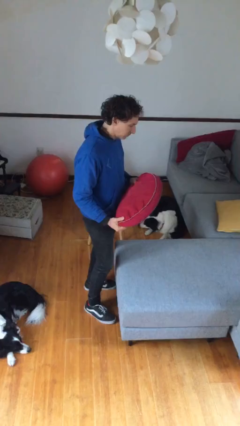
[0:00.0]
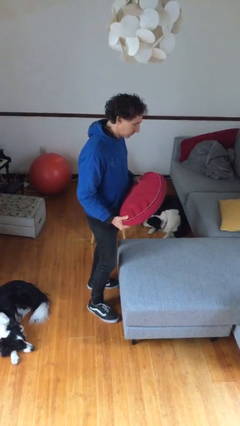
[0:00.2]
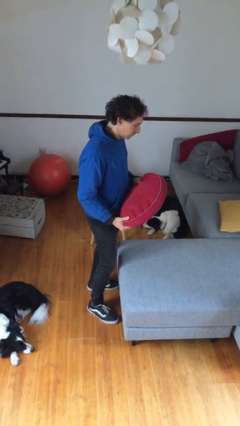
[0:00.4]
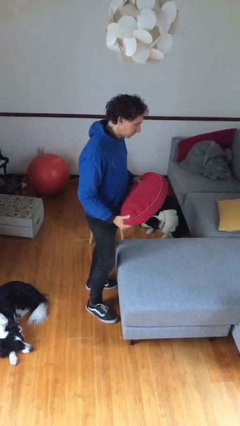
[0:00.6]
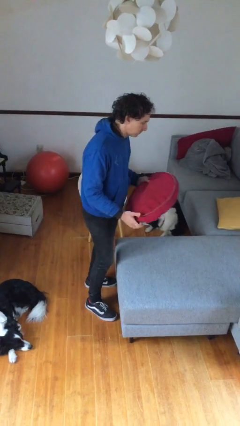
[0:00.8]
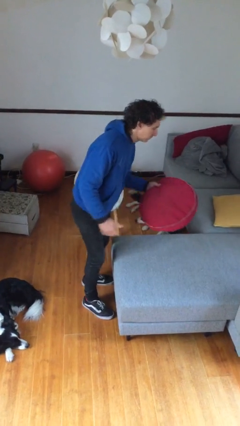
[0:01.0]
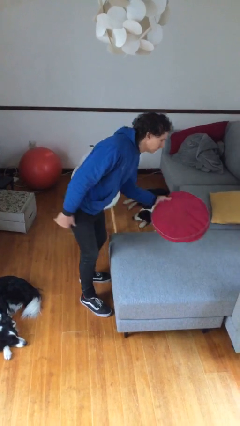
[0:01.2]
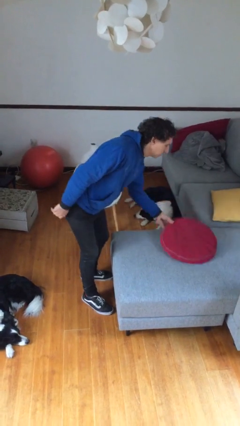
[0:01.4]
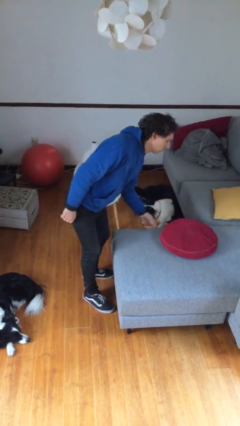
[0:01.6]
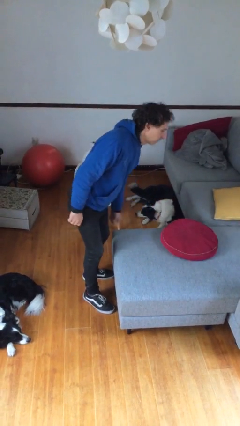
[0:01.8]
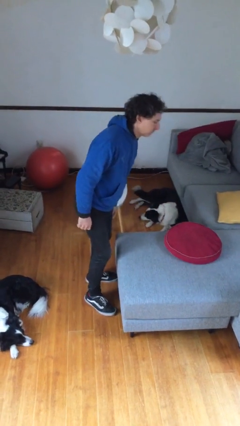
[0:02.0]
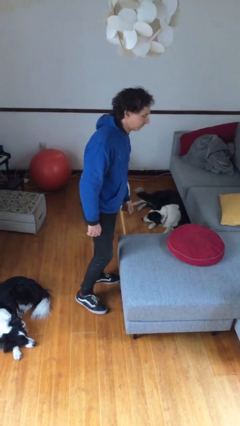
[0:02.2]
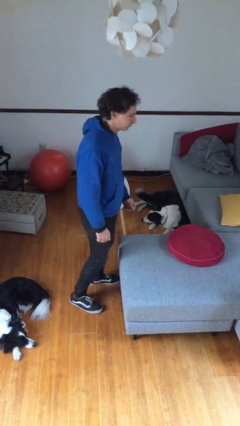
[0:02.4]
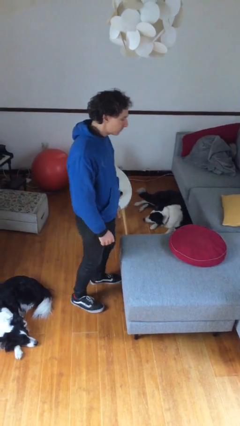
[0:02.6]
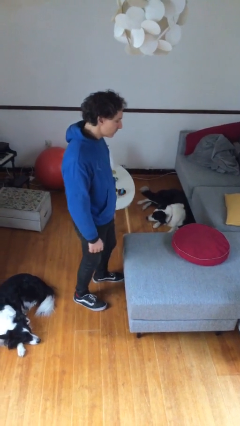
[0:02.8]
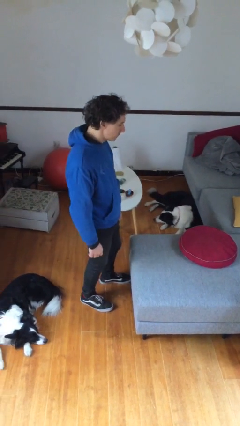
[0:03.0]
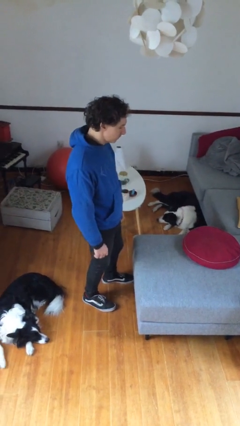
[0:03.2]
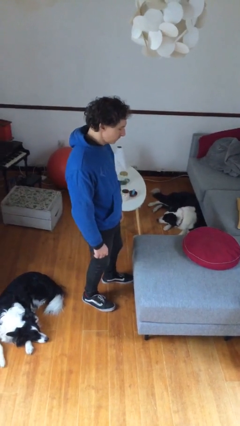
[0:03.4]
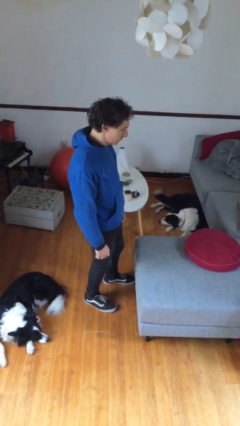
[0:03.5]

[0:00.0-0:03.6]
person puts down object on couch

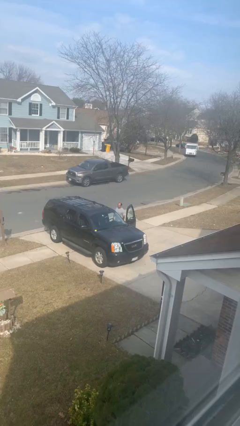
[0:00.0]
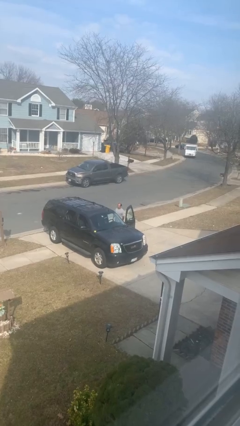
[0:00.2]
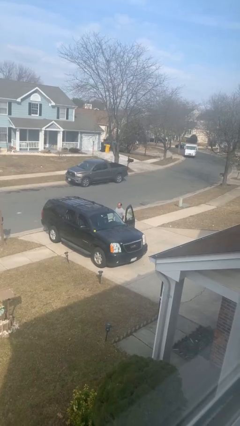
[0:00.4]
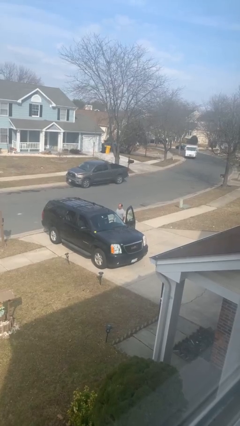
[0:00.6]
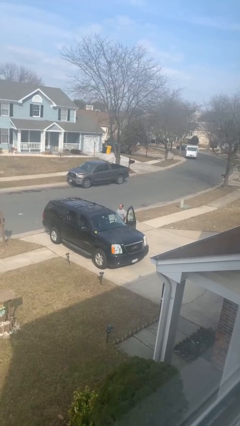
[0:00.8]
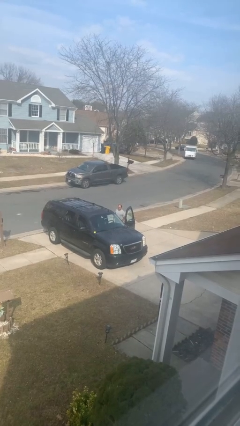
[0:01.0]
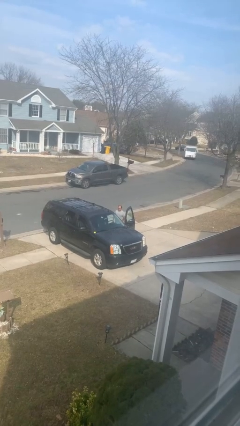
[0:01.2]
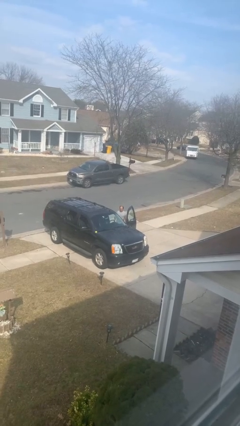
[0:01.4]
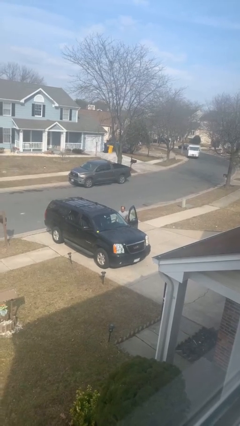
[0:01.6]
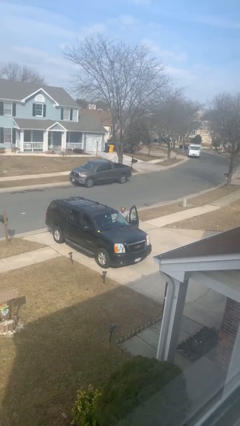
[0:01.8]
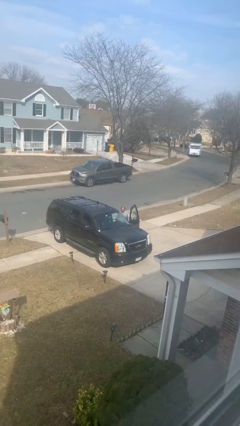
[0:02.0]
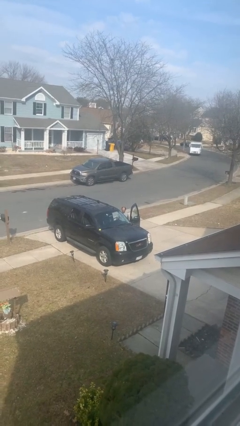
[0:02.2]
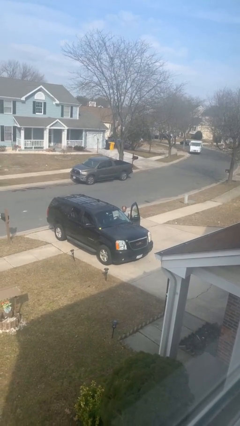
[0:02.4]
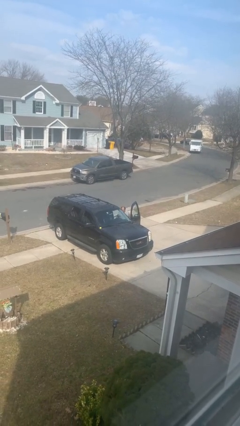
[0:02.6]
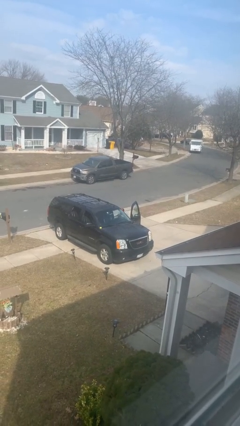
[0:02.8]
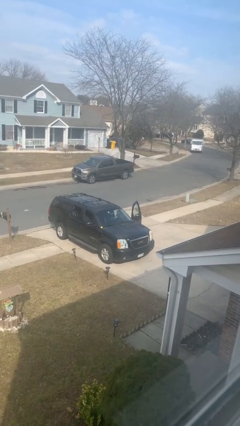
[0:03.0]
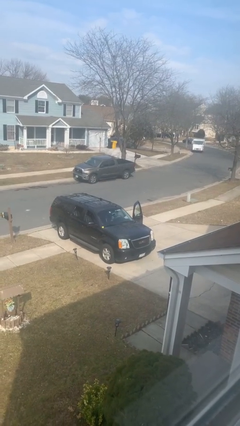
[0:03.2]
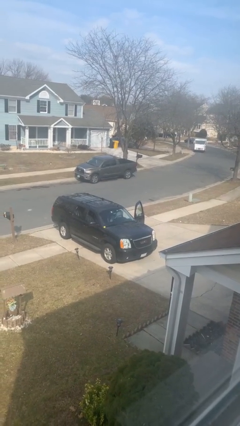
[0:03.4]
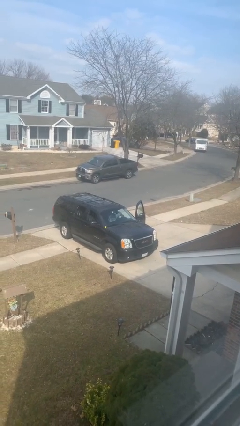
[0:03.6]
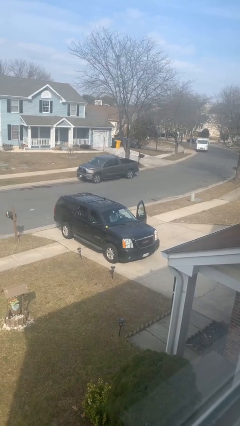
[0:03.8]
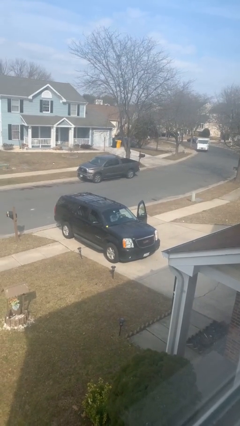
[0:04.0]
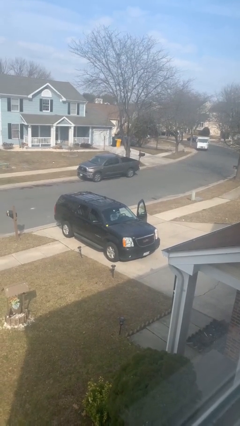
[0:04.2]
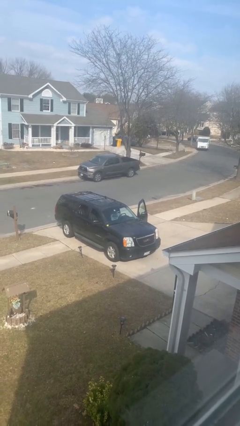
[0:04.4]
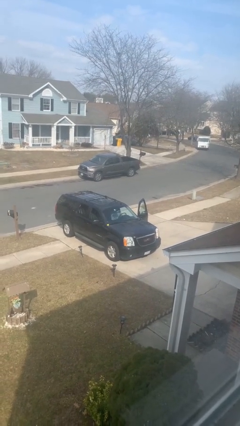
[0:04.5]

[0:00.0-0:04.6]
person enters car

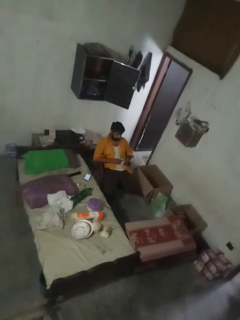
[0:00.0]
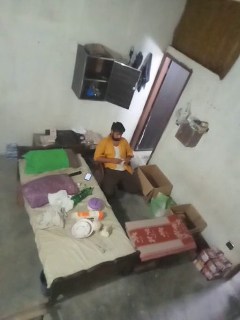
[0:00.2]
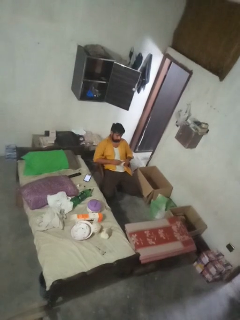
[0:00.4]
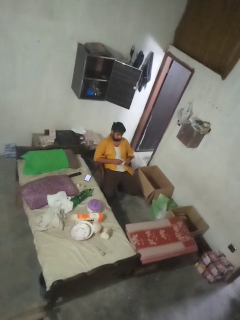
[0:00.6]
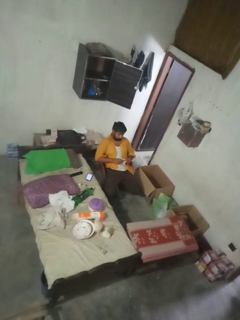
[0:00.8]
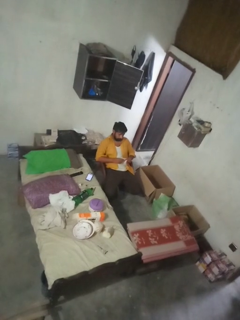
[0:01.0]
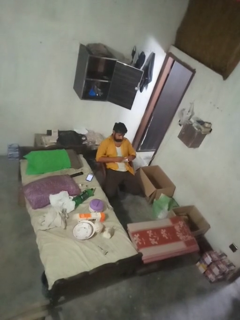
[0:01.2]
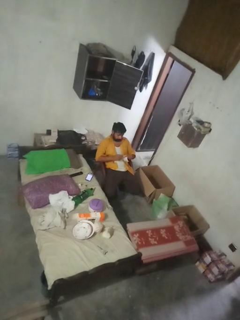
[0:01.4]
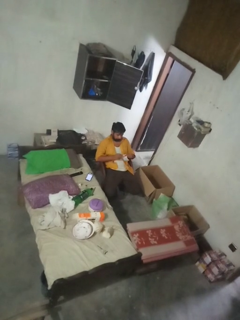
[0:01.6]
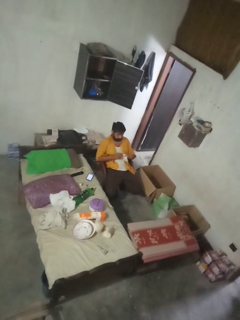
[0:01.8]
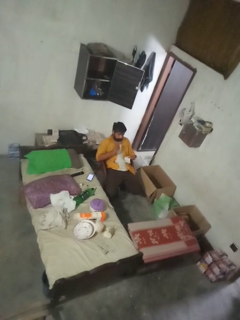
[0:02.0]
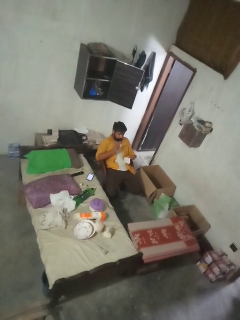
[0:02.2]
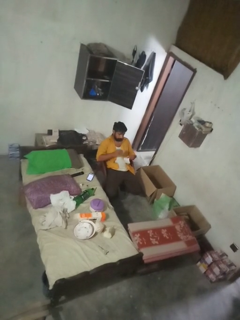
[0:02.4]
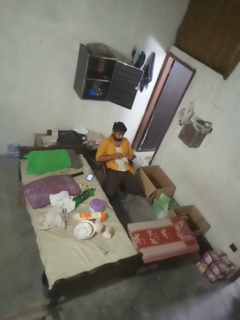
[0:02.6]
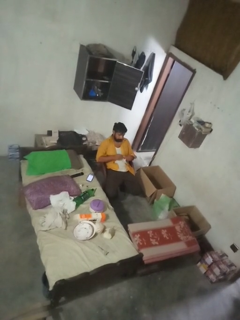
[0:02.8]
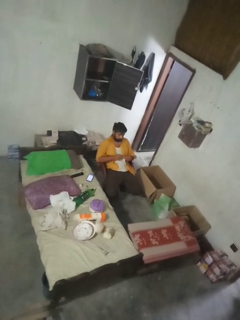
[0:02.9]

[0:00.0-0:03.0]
person tears paper

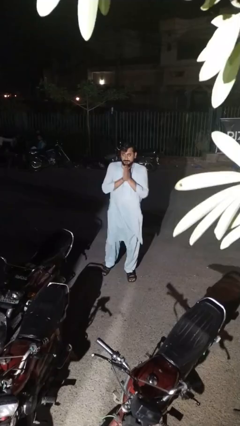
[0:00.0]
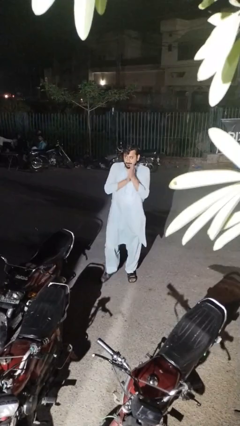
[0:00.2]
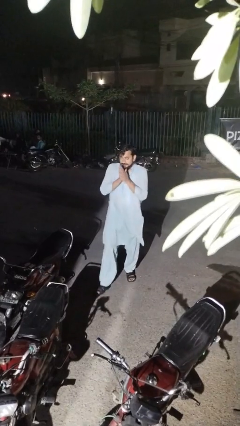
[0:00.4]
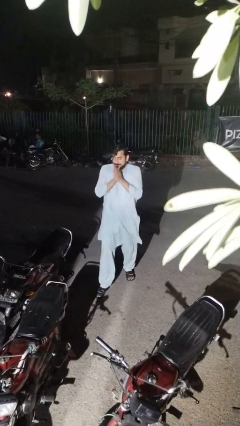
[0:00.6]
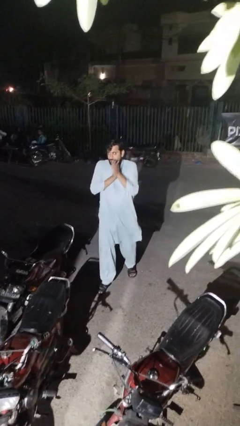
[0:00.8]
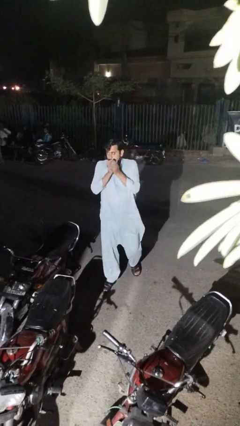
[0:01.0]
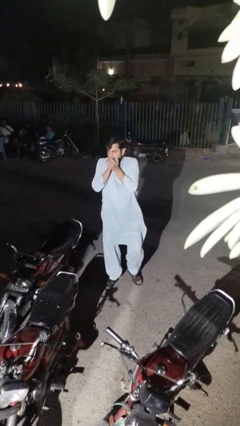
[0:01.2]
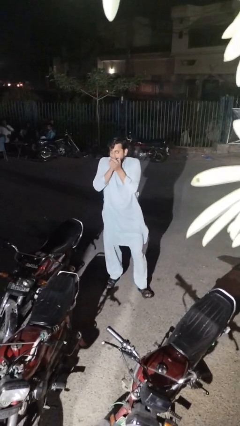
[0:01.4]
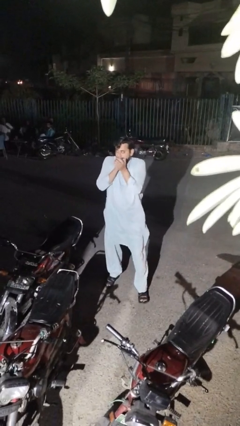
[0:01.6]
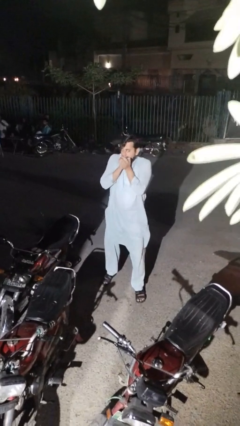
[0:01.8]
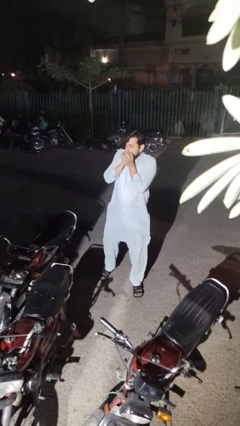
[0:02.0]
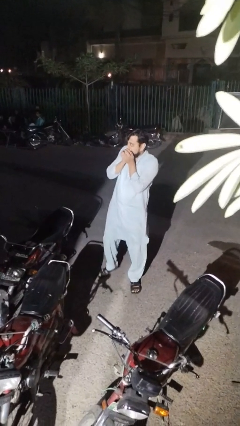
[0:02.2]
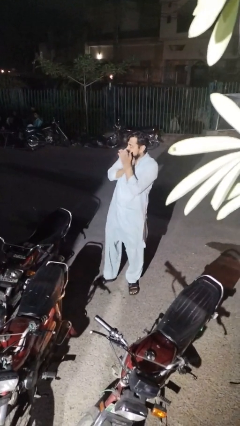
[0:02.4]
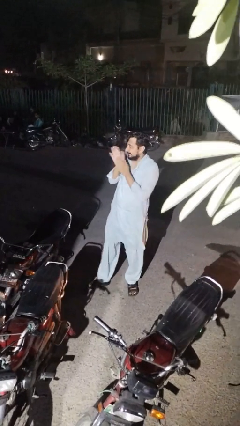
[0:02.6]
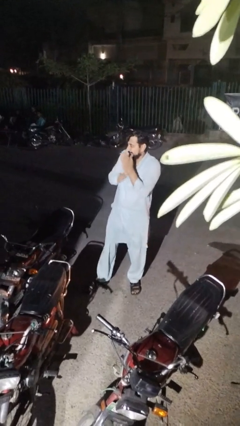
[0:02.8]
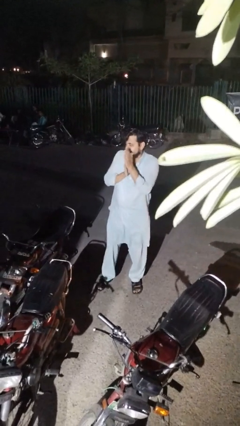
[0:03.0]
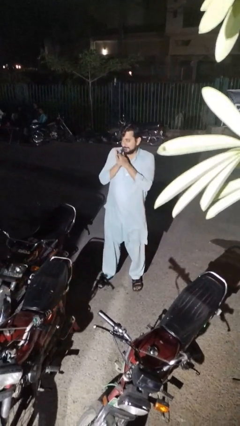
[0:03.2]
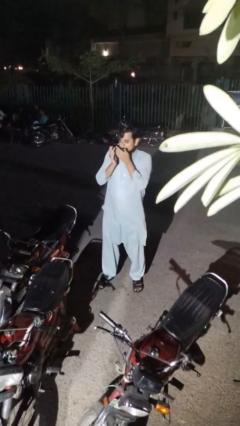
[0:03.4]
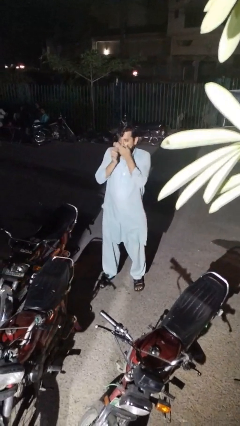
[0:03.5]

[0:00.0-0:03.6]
person blows into hands

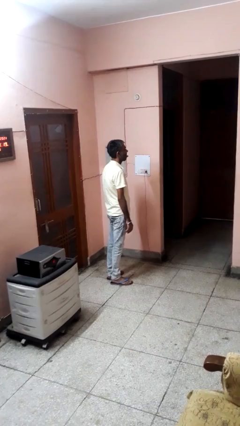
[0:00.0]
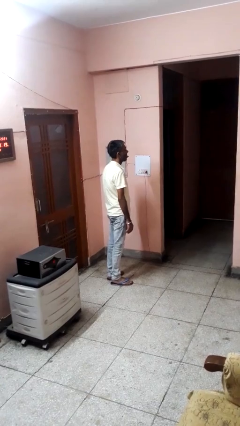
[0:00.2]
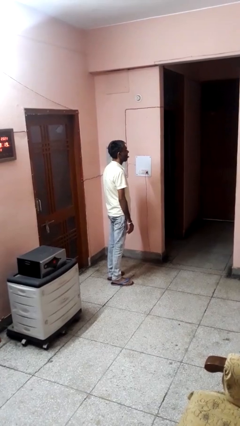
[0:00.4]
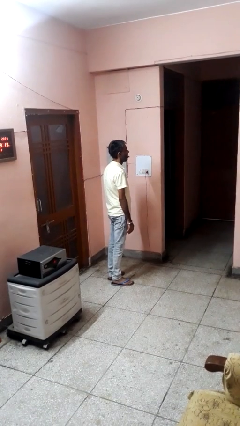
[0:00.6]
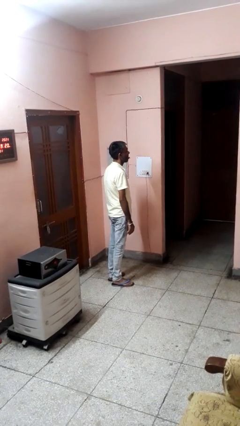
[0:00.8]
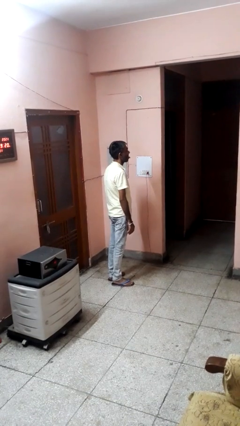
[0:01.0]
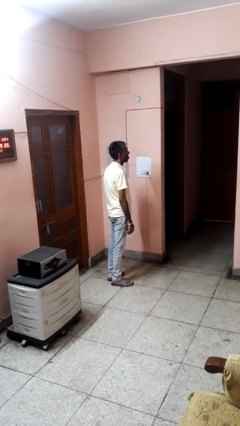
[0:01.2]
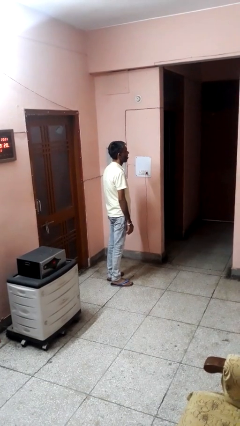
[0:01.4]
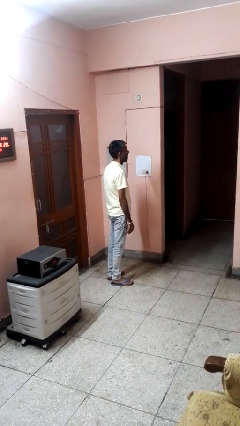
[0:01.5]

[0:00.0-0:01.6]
person sticks out tongue

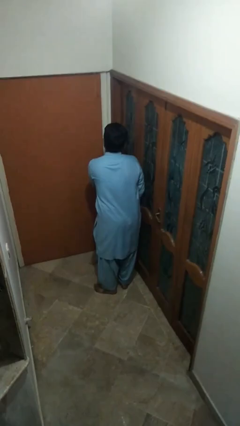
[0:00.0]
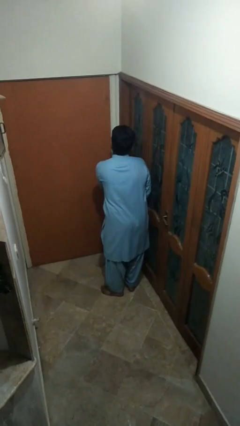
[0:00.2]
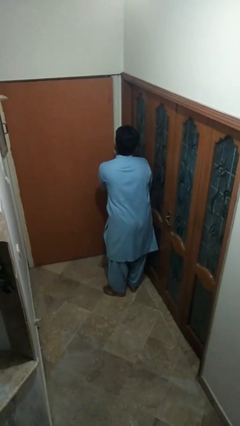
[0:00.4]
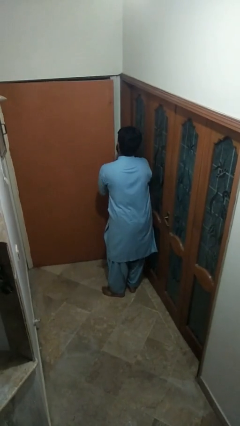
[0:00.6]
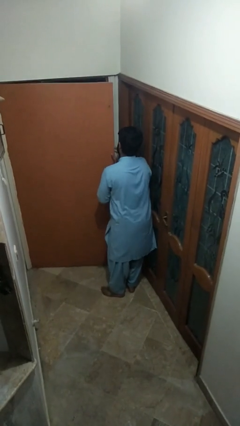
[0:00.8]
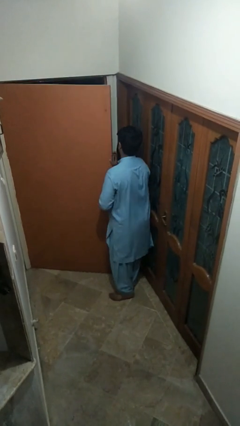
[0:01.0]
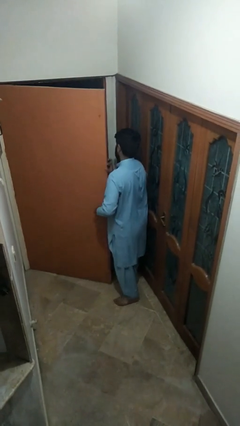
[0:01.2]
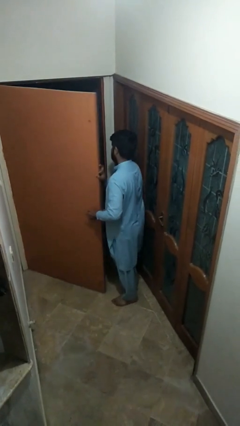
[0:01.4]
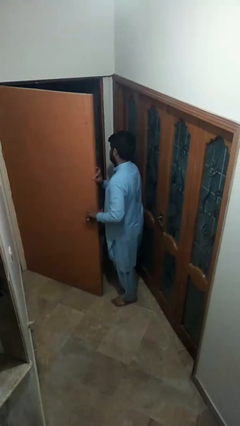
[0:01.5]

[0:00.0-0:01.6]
person opens facility door
